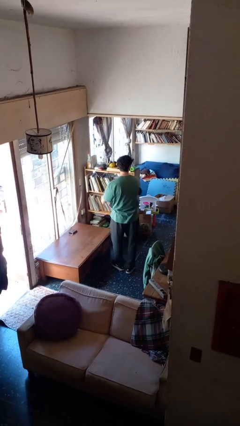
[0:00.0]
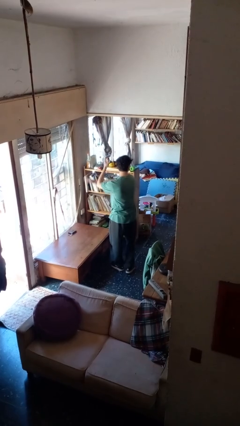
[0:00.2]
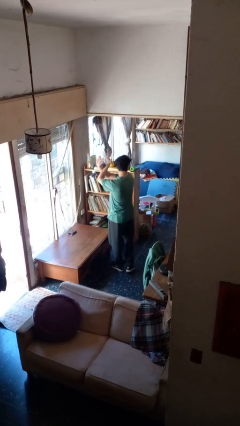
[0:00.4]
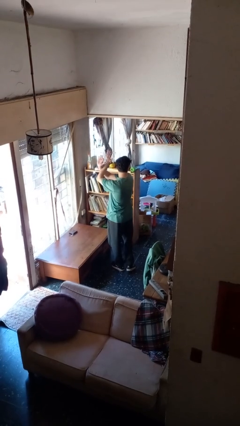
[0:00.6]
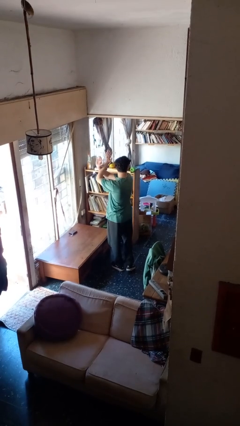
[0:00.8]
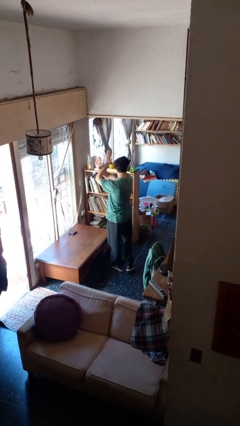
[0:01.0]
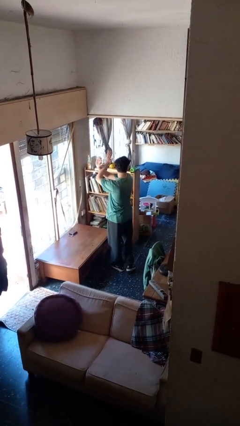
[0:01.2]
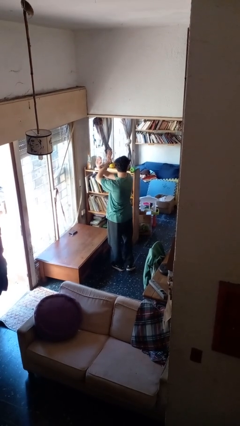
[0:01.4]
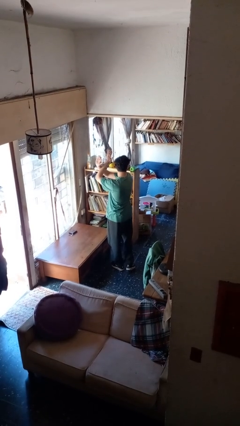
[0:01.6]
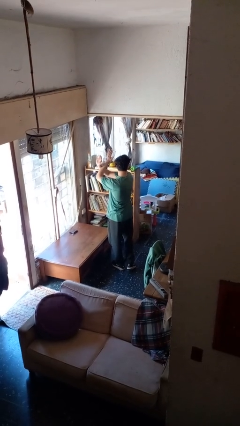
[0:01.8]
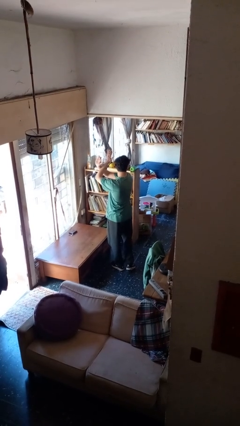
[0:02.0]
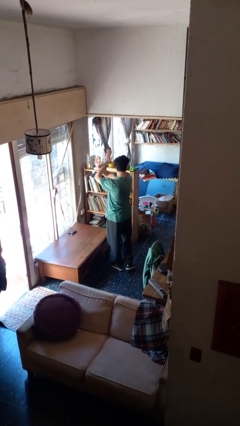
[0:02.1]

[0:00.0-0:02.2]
person gestures arms x

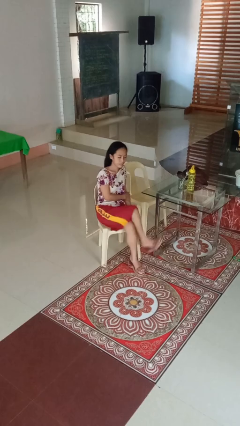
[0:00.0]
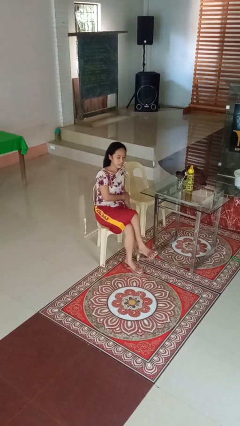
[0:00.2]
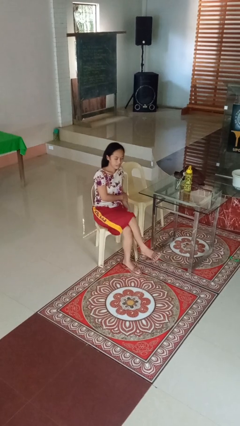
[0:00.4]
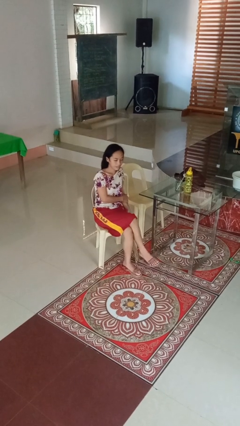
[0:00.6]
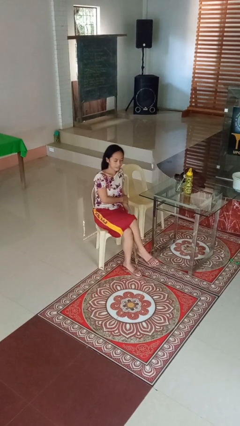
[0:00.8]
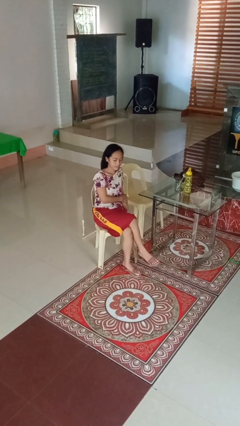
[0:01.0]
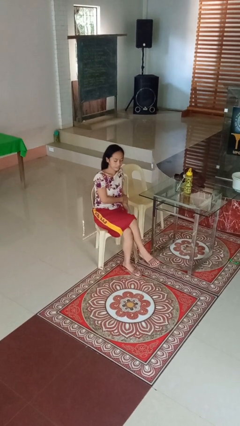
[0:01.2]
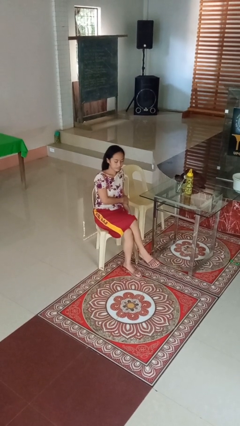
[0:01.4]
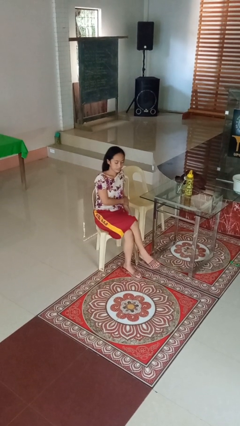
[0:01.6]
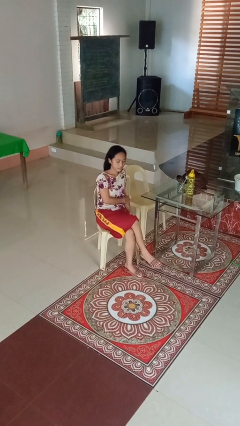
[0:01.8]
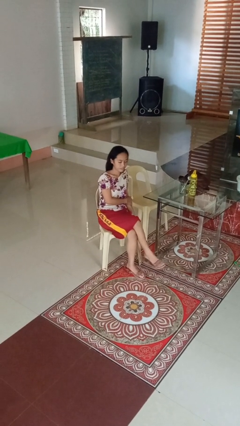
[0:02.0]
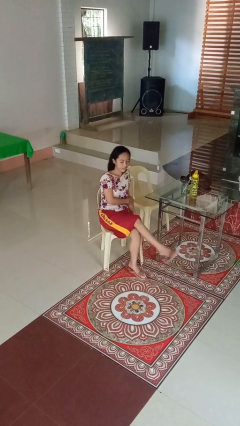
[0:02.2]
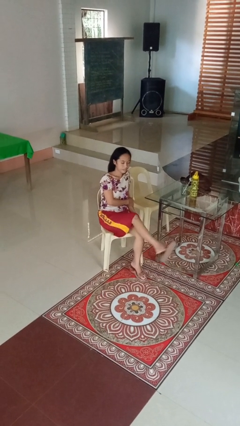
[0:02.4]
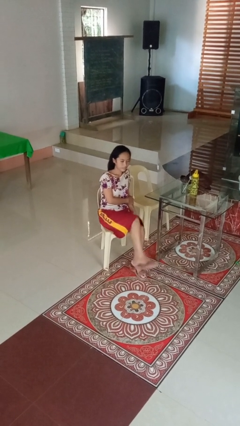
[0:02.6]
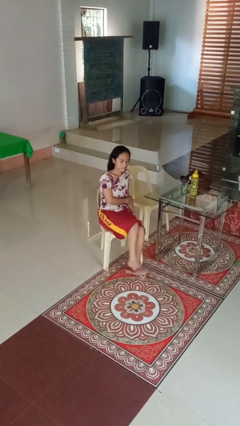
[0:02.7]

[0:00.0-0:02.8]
person crosses legs

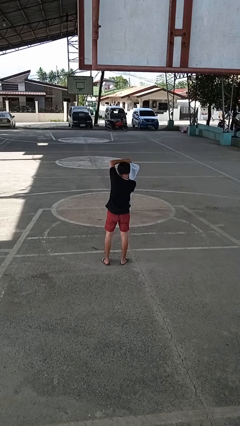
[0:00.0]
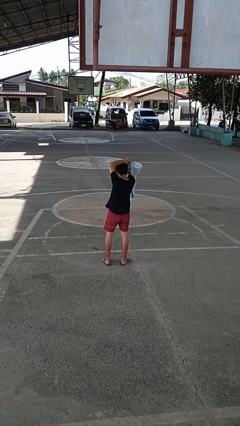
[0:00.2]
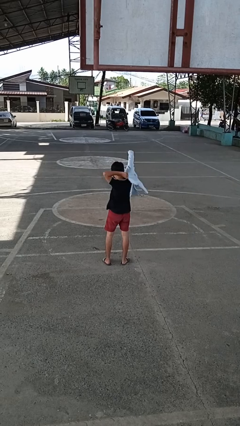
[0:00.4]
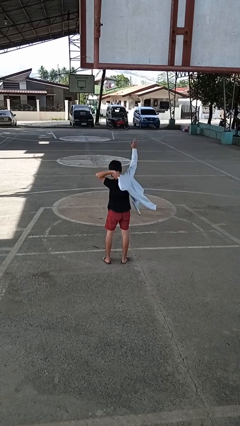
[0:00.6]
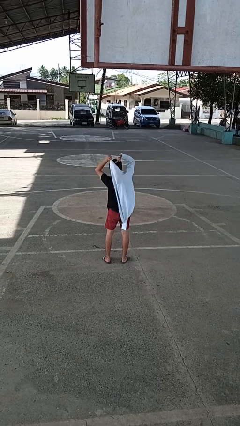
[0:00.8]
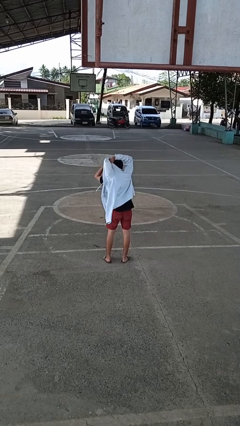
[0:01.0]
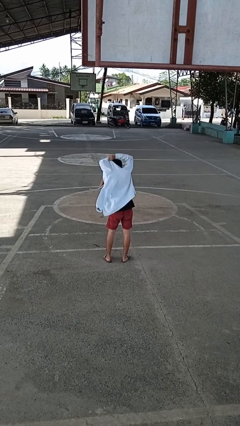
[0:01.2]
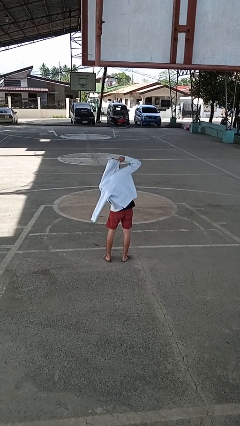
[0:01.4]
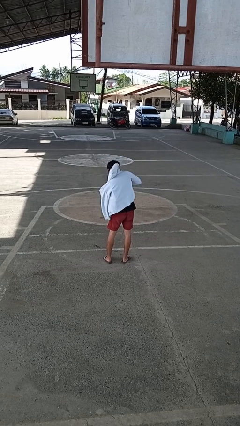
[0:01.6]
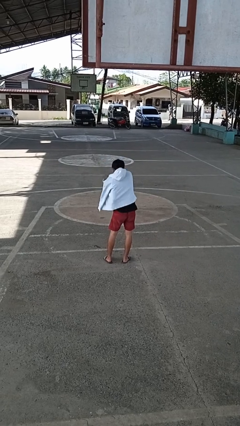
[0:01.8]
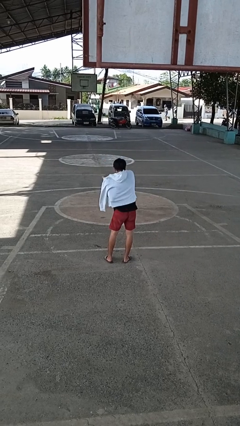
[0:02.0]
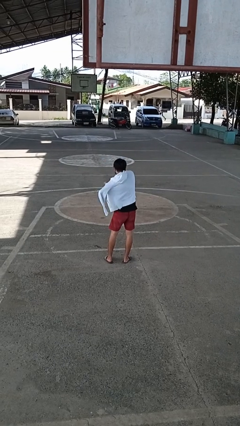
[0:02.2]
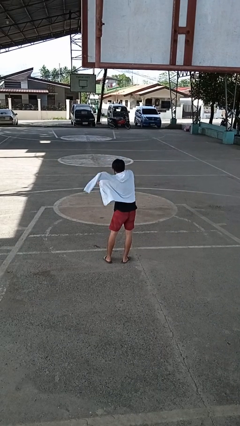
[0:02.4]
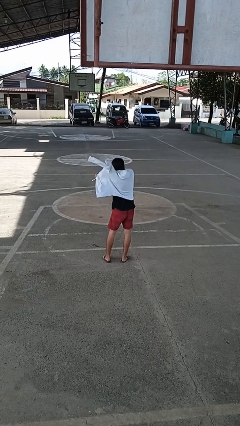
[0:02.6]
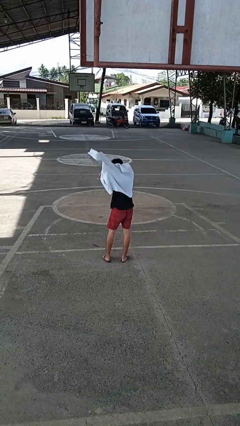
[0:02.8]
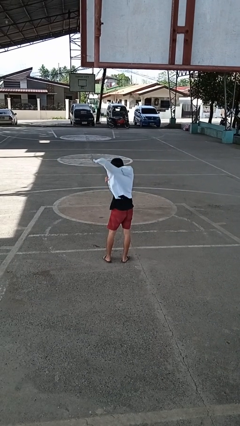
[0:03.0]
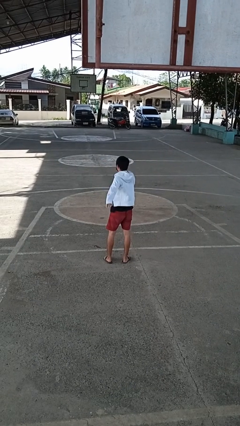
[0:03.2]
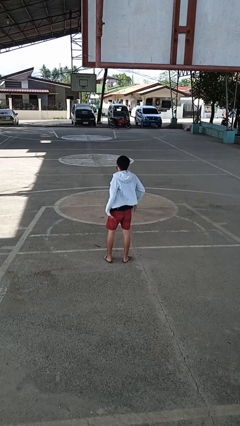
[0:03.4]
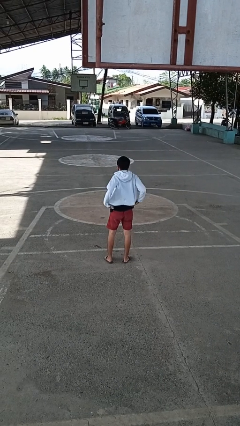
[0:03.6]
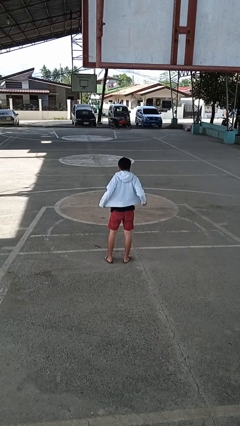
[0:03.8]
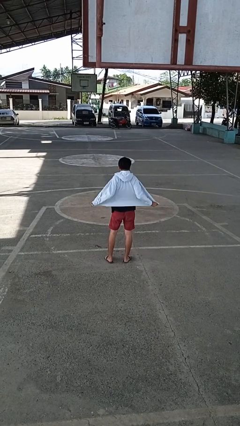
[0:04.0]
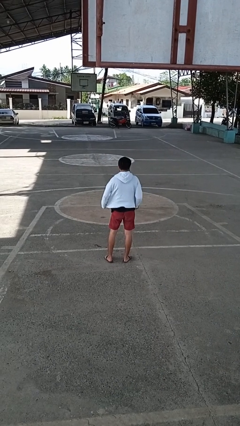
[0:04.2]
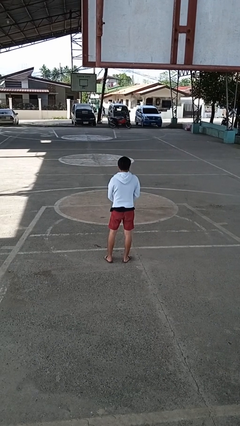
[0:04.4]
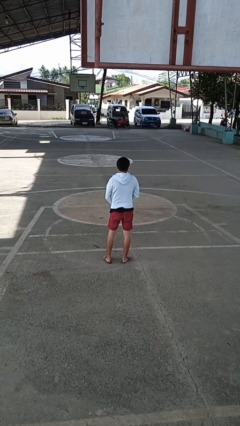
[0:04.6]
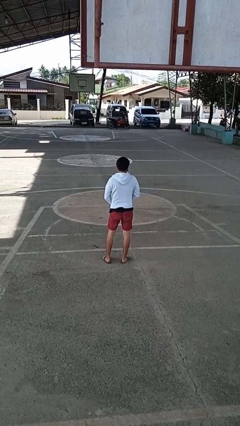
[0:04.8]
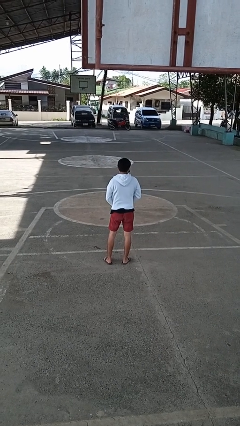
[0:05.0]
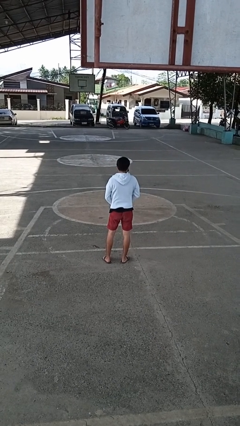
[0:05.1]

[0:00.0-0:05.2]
person puts on jacket

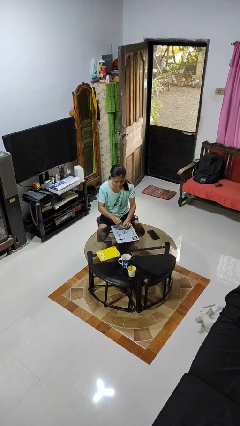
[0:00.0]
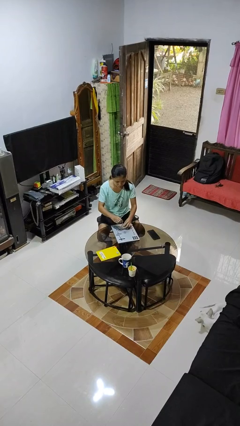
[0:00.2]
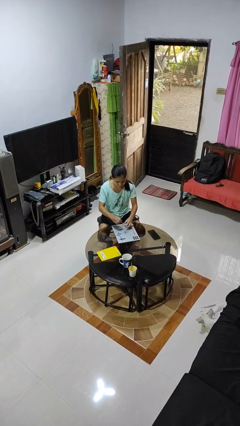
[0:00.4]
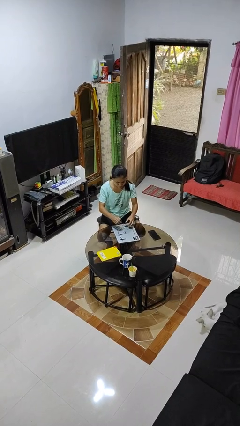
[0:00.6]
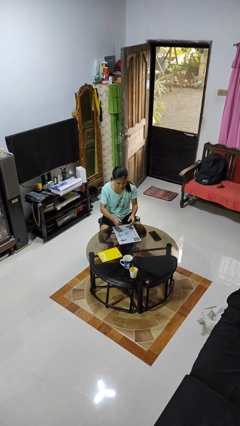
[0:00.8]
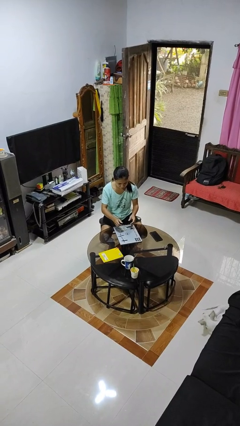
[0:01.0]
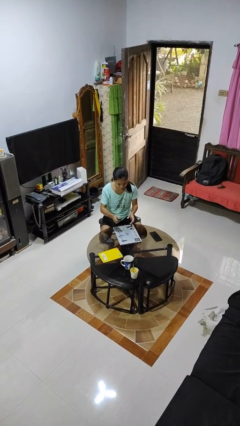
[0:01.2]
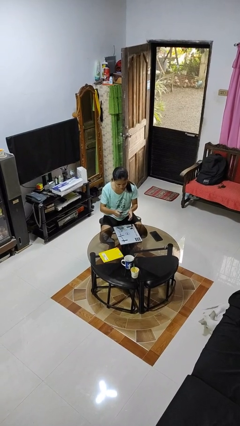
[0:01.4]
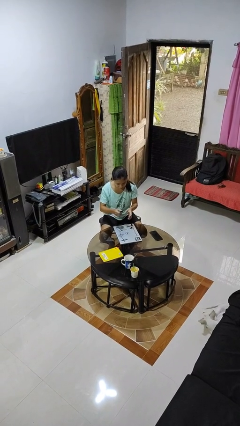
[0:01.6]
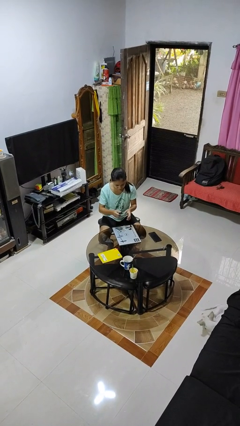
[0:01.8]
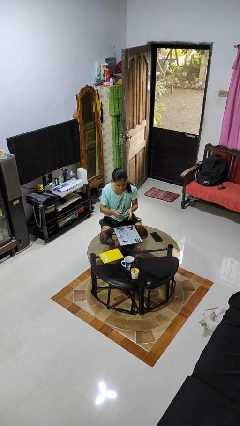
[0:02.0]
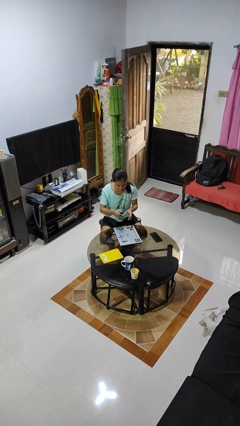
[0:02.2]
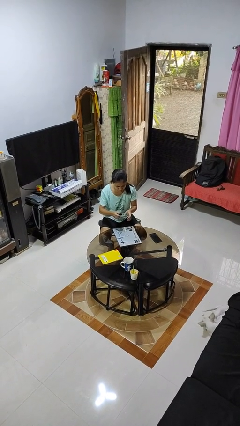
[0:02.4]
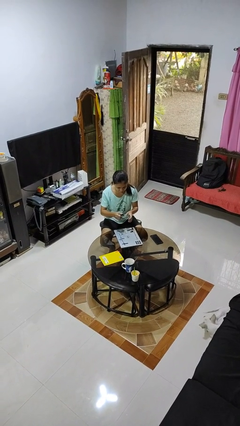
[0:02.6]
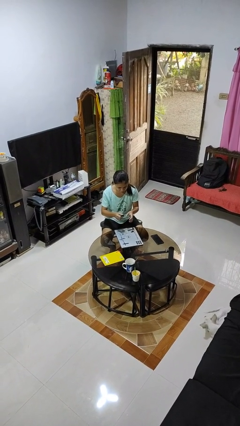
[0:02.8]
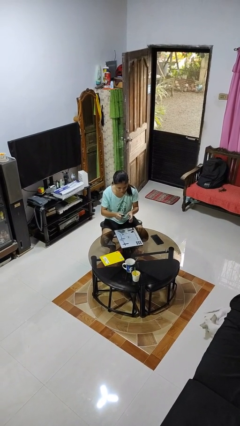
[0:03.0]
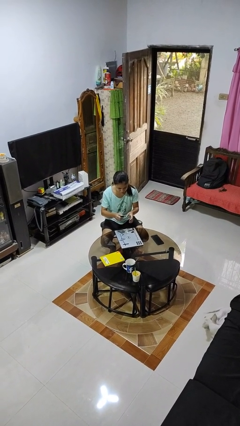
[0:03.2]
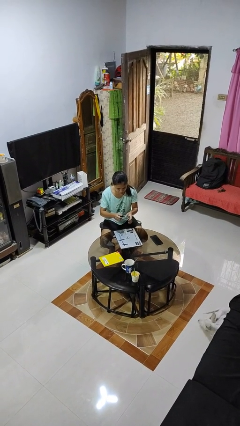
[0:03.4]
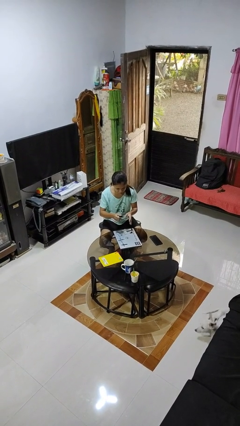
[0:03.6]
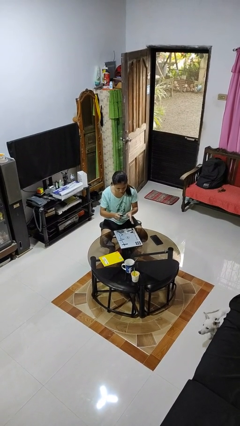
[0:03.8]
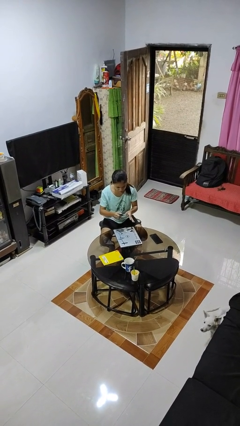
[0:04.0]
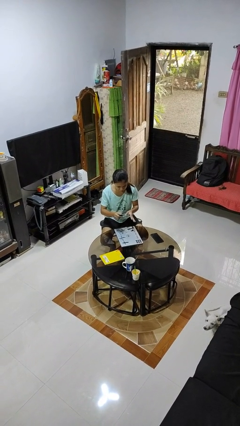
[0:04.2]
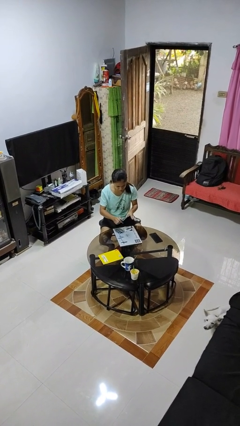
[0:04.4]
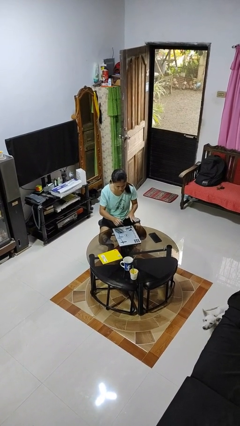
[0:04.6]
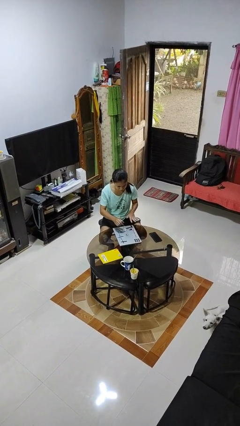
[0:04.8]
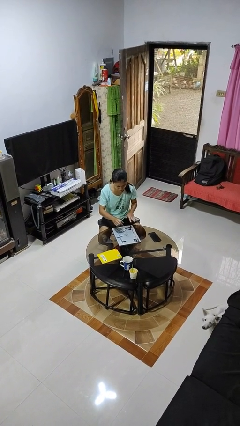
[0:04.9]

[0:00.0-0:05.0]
person paints fingernails

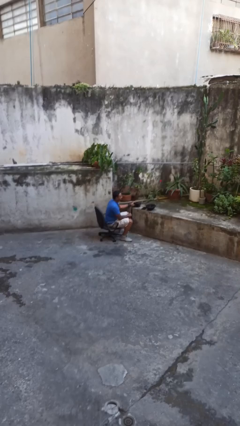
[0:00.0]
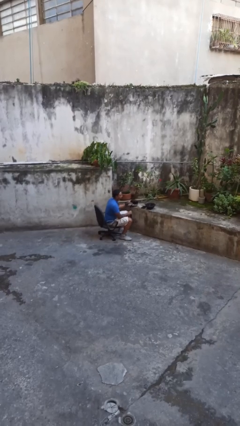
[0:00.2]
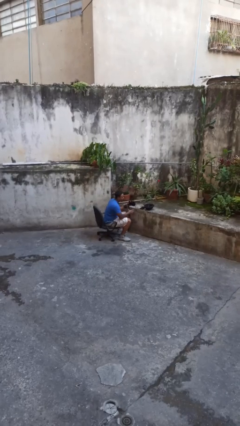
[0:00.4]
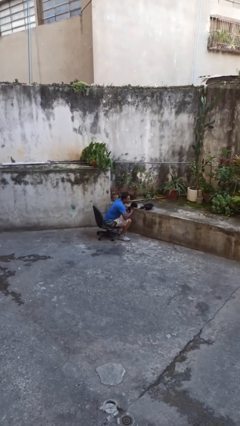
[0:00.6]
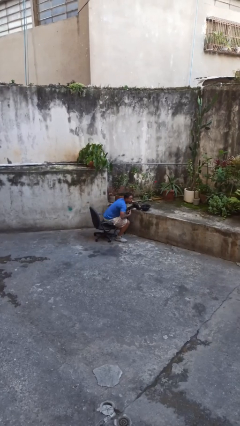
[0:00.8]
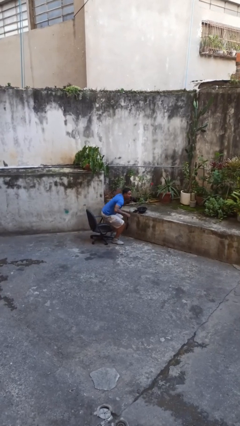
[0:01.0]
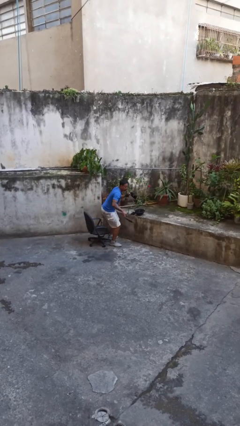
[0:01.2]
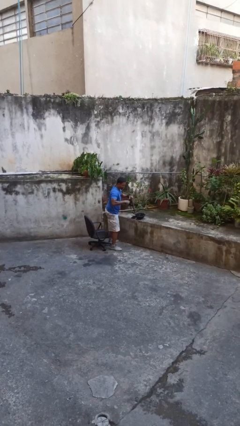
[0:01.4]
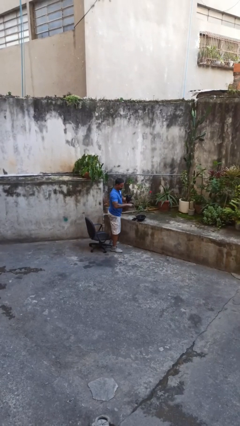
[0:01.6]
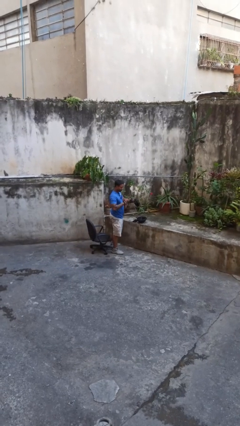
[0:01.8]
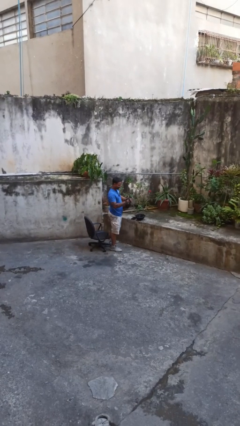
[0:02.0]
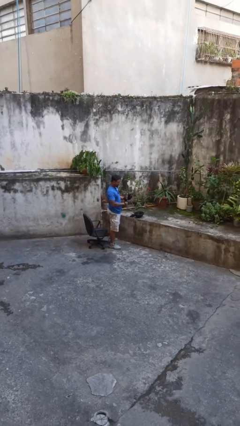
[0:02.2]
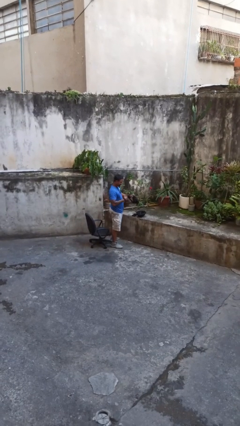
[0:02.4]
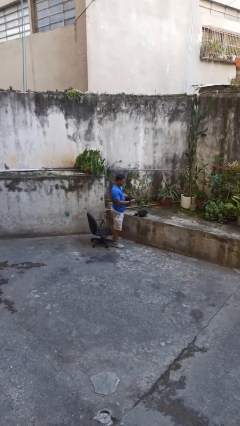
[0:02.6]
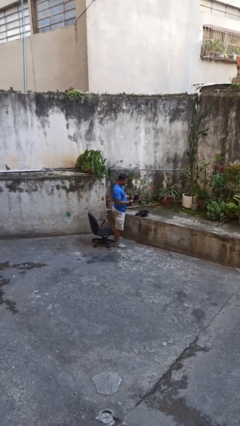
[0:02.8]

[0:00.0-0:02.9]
person stands up
